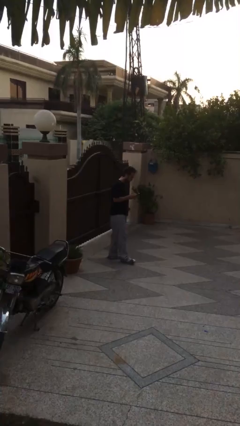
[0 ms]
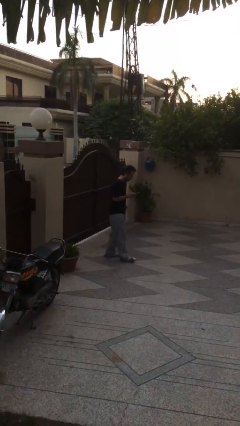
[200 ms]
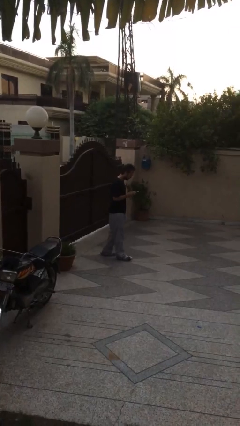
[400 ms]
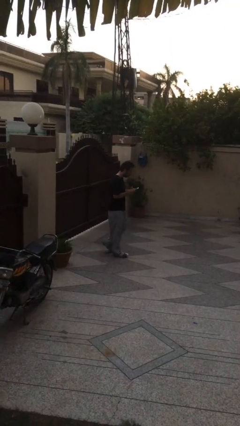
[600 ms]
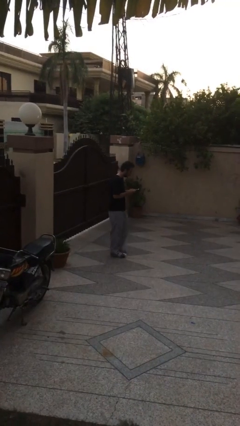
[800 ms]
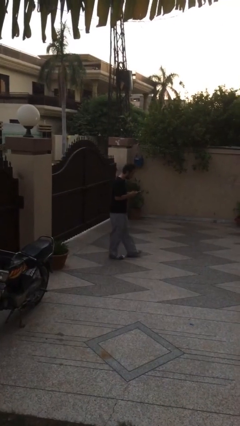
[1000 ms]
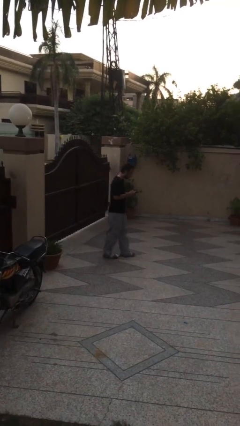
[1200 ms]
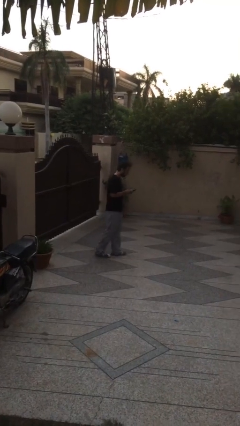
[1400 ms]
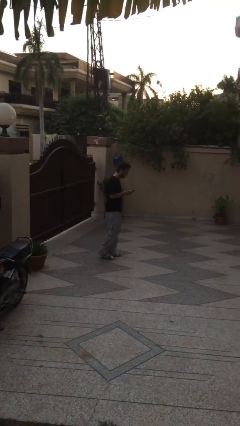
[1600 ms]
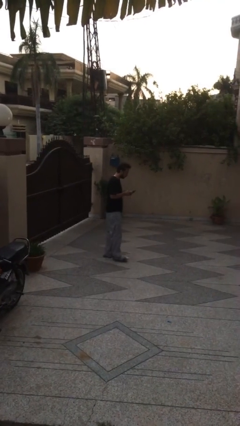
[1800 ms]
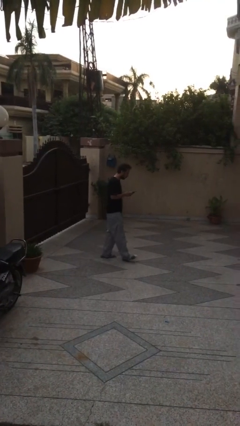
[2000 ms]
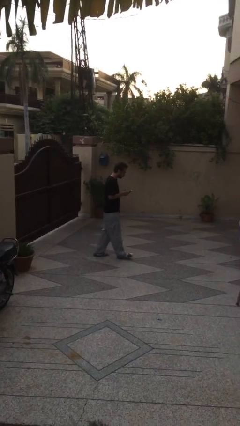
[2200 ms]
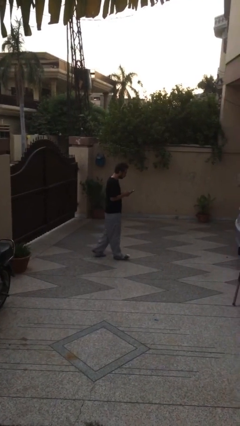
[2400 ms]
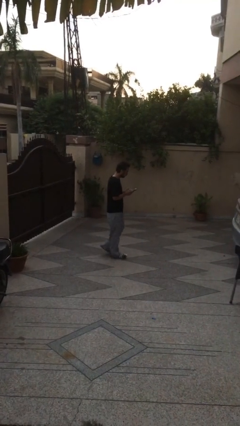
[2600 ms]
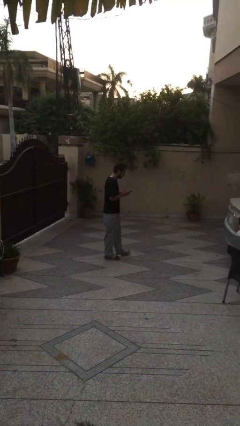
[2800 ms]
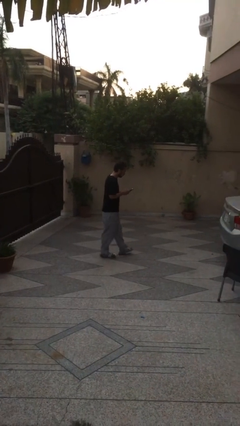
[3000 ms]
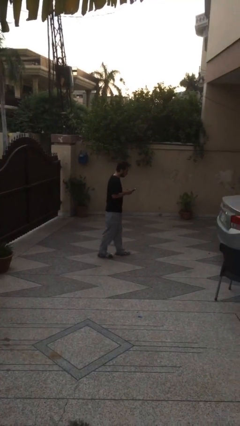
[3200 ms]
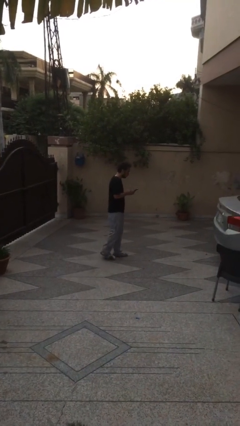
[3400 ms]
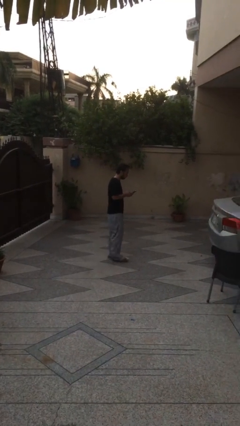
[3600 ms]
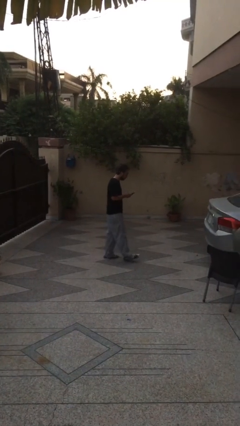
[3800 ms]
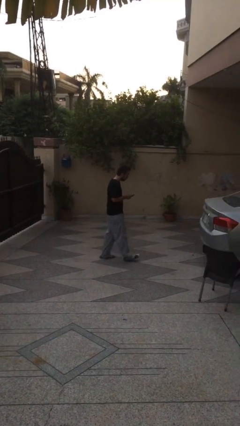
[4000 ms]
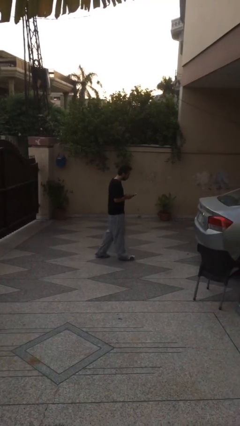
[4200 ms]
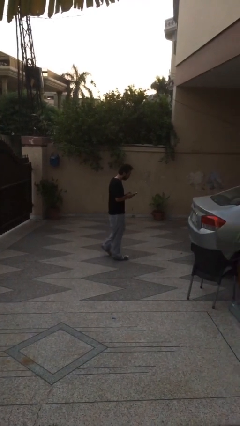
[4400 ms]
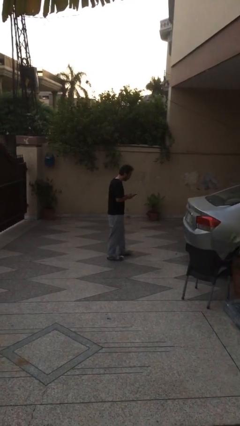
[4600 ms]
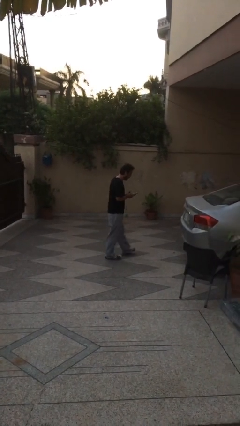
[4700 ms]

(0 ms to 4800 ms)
person texts on phone

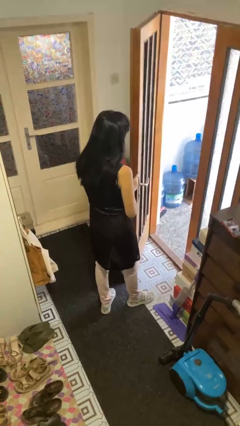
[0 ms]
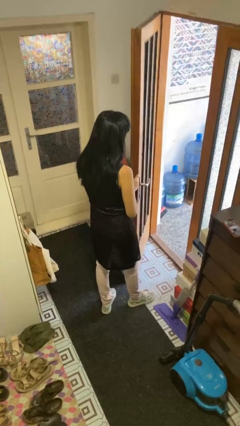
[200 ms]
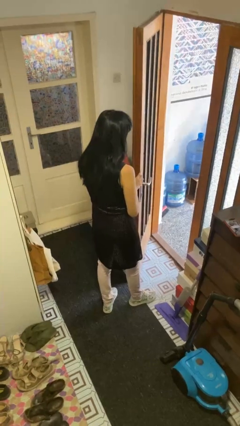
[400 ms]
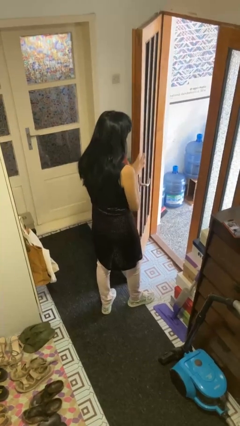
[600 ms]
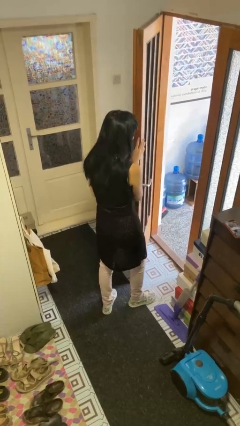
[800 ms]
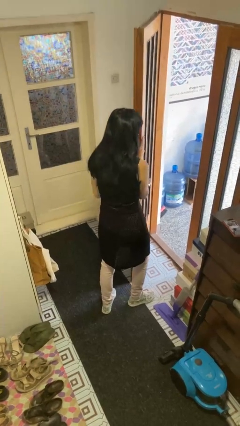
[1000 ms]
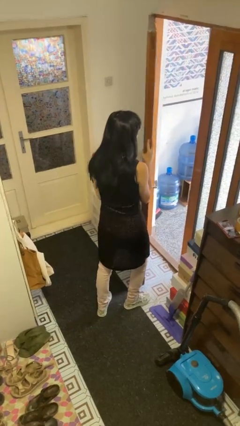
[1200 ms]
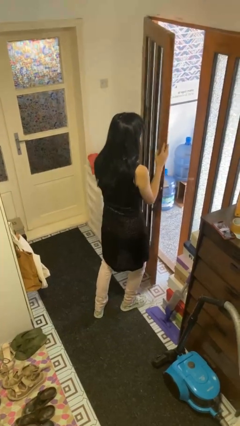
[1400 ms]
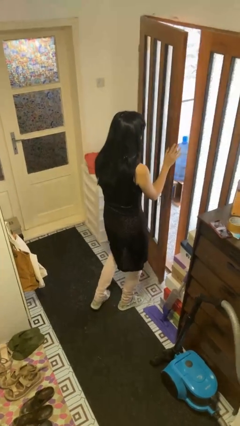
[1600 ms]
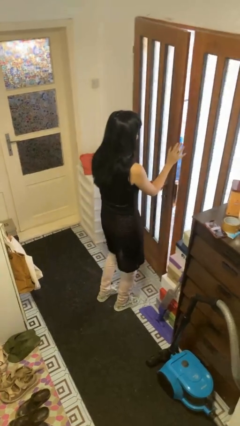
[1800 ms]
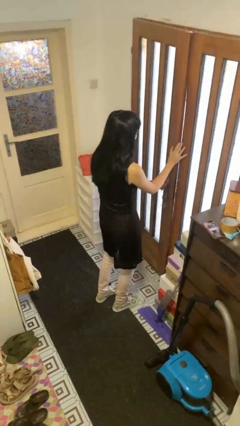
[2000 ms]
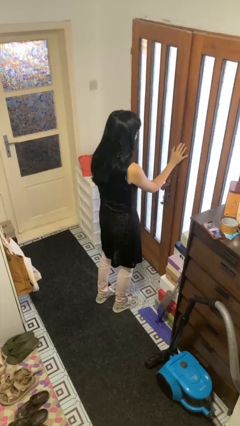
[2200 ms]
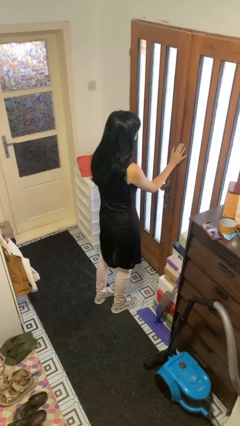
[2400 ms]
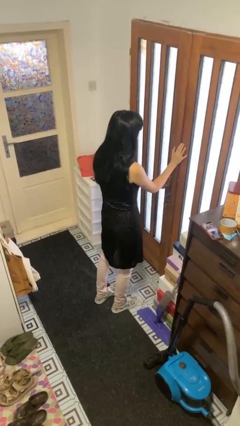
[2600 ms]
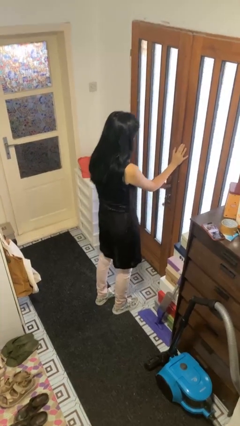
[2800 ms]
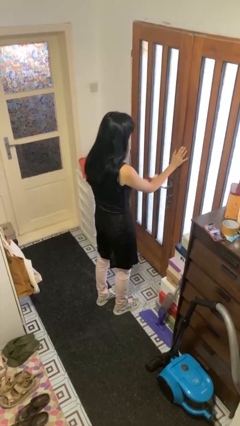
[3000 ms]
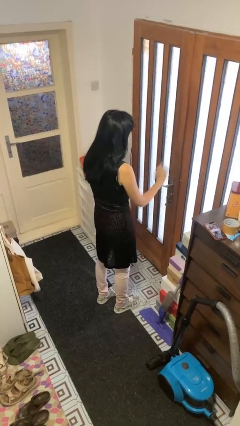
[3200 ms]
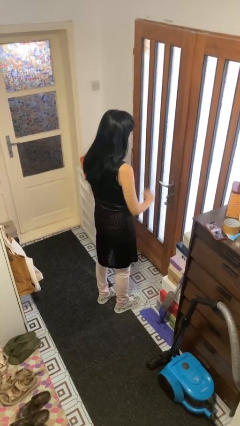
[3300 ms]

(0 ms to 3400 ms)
person closes facility door

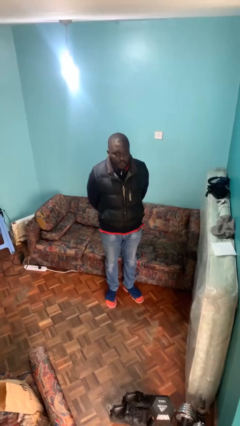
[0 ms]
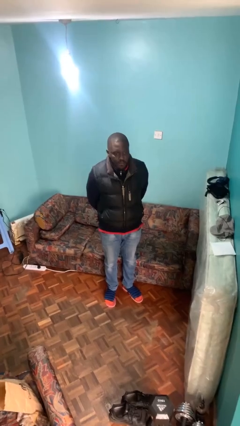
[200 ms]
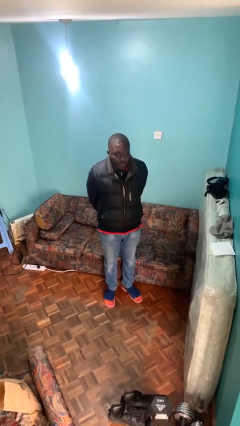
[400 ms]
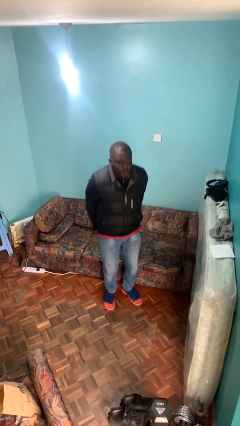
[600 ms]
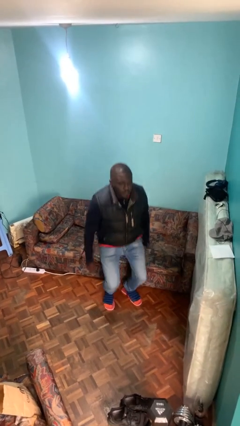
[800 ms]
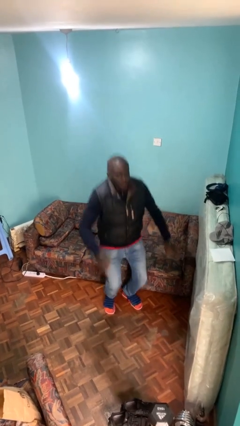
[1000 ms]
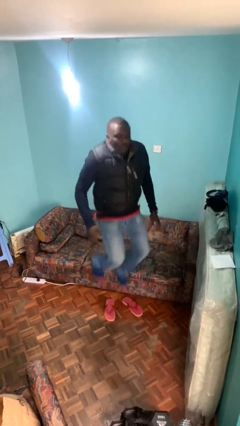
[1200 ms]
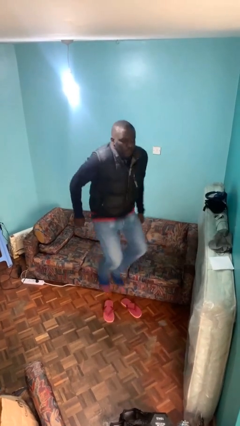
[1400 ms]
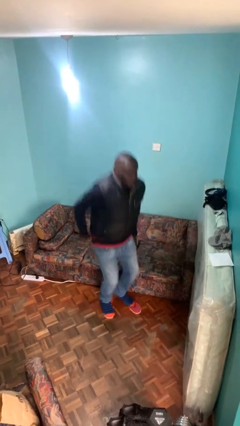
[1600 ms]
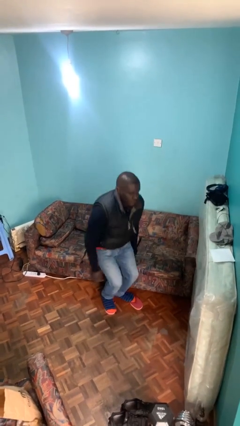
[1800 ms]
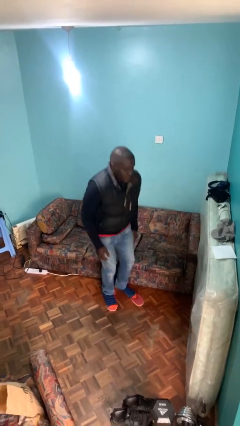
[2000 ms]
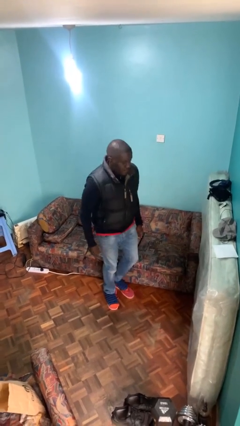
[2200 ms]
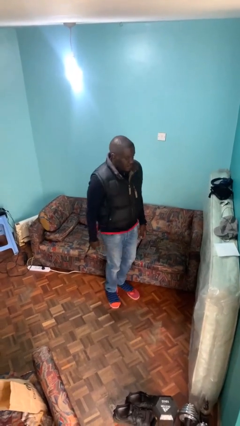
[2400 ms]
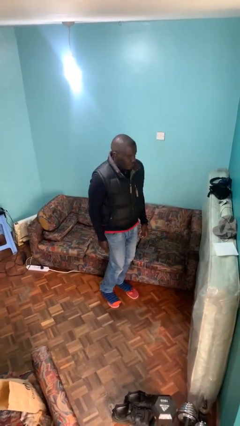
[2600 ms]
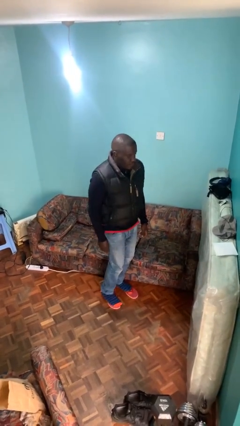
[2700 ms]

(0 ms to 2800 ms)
person jumps

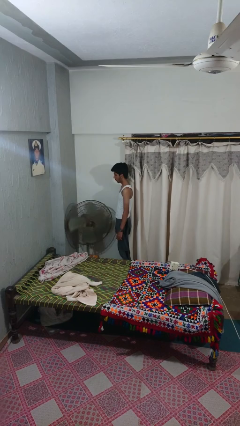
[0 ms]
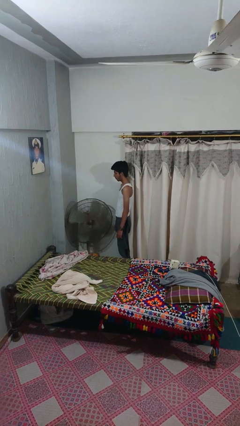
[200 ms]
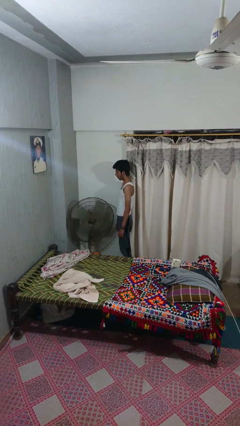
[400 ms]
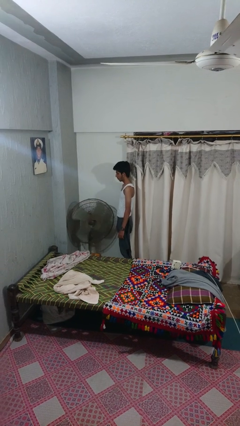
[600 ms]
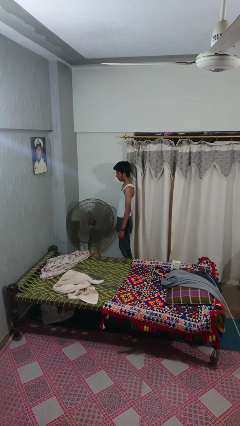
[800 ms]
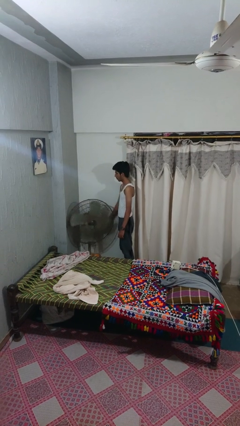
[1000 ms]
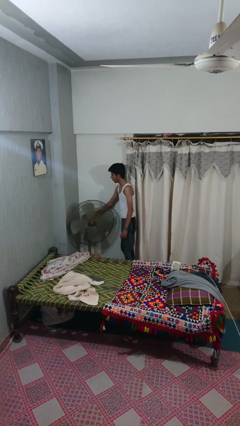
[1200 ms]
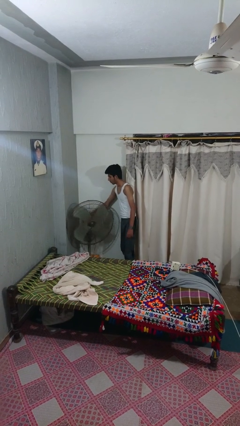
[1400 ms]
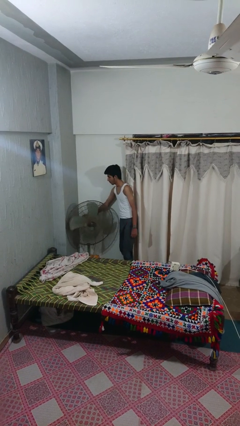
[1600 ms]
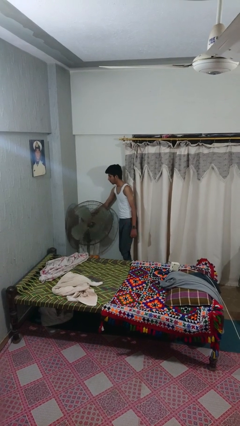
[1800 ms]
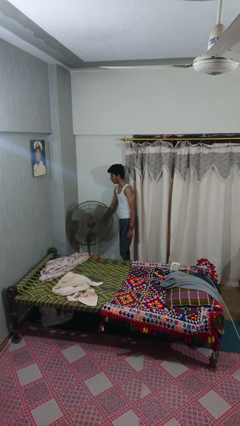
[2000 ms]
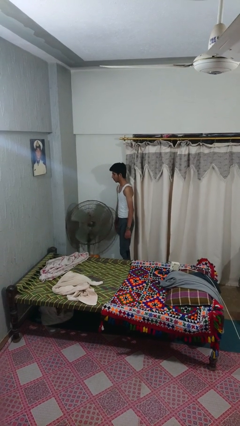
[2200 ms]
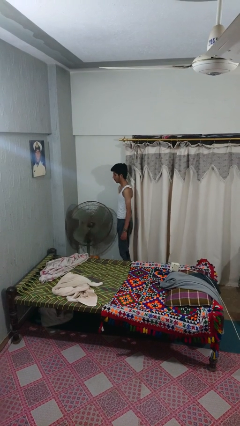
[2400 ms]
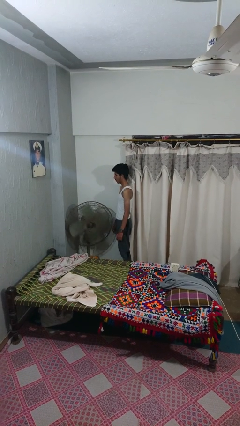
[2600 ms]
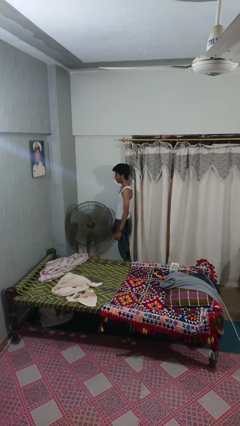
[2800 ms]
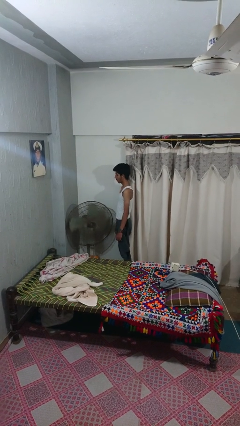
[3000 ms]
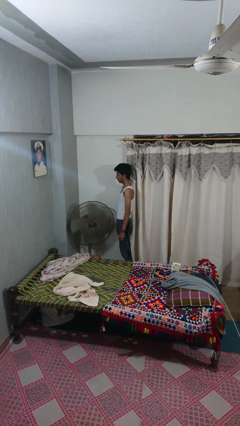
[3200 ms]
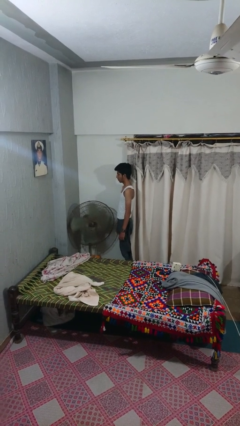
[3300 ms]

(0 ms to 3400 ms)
person turns on fan

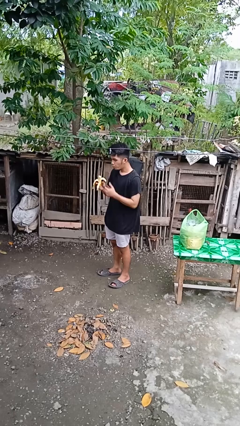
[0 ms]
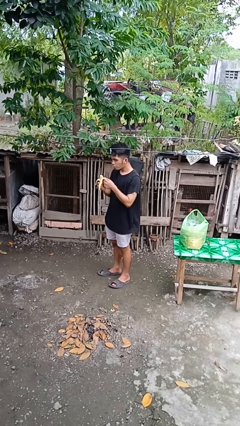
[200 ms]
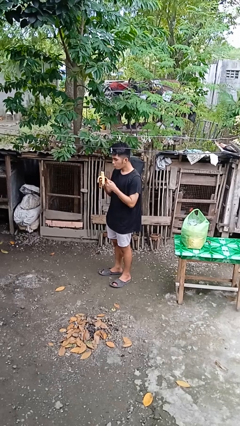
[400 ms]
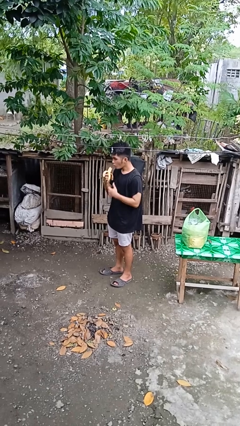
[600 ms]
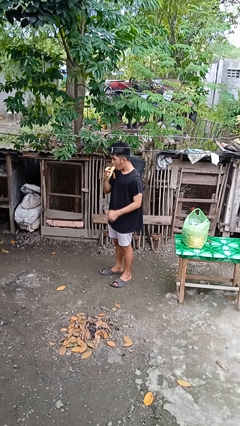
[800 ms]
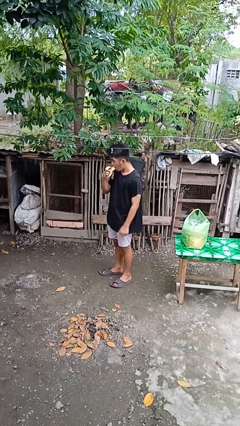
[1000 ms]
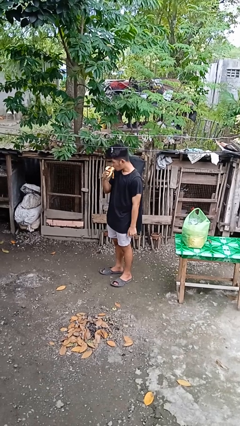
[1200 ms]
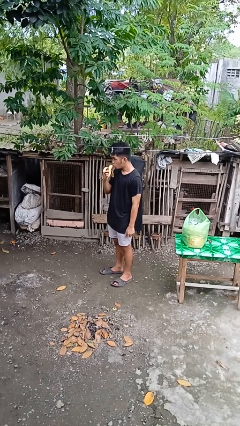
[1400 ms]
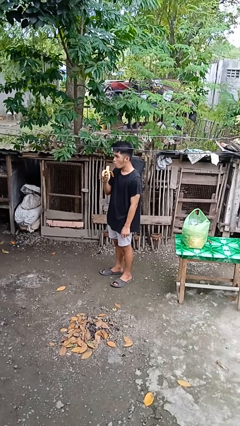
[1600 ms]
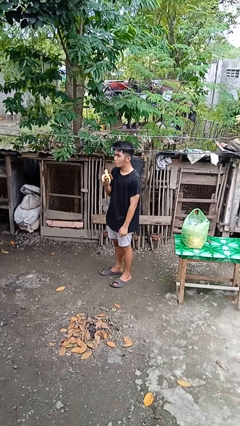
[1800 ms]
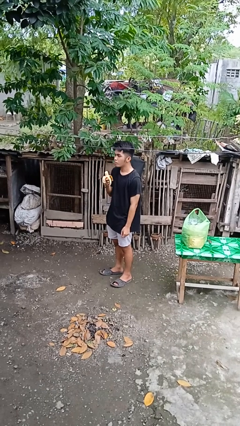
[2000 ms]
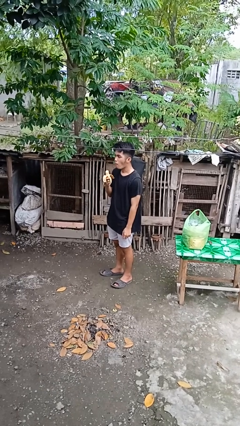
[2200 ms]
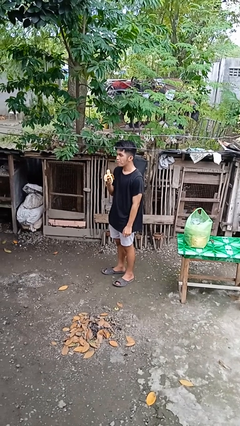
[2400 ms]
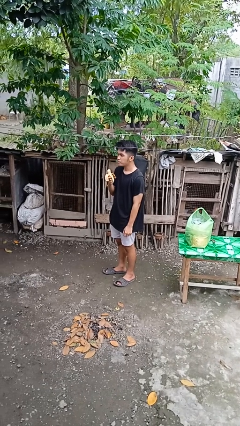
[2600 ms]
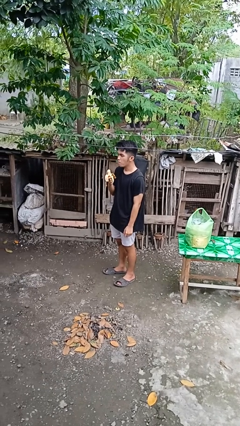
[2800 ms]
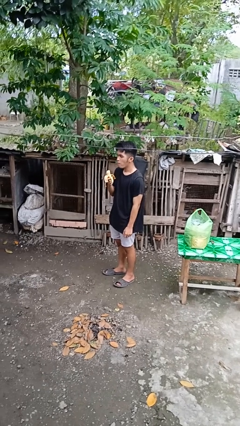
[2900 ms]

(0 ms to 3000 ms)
person eats banana

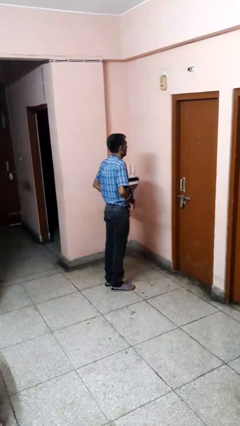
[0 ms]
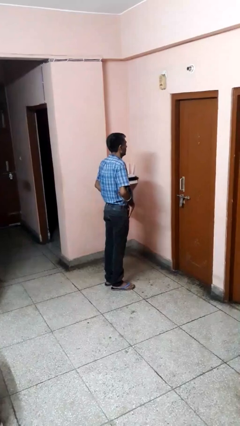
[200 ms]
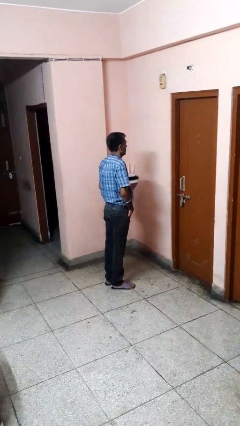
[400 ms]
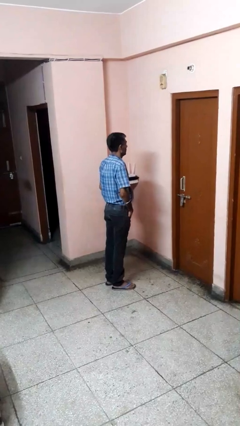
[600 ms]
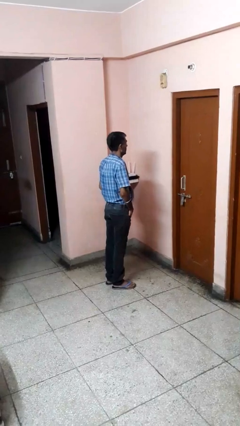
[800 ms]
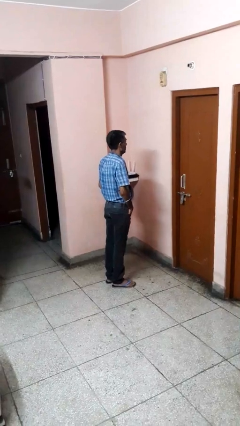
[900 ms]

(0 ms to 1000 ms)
person puts hands in back pockets
